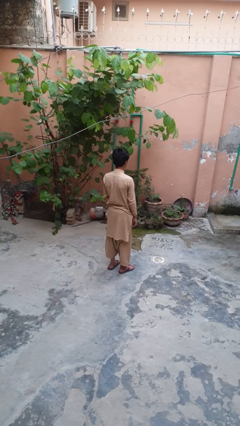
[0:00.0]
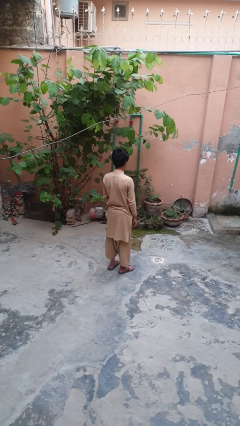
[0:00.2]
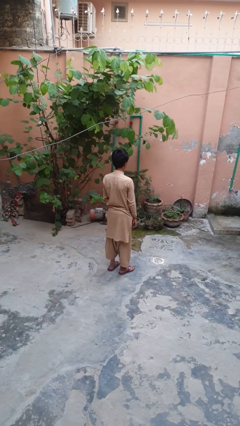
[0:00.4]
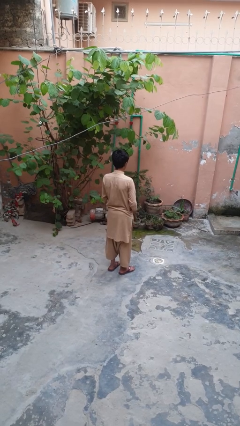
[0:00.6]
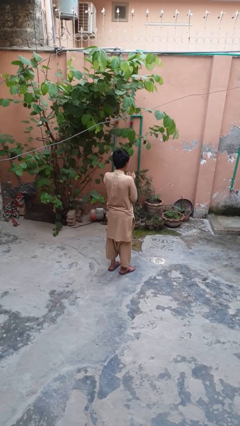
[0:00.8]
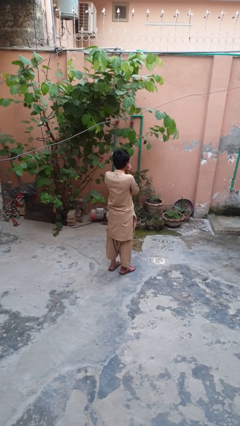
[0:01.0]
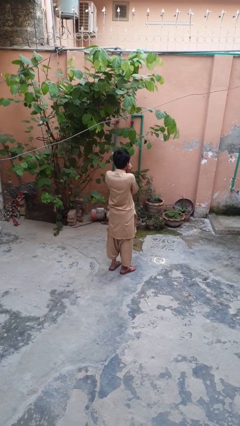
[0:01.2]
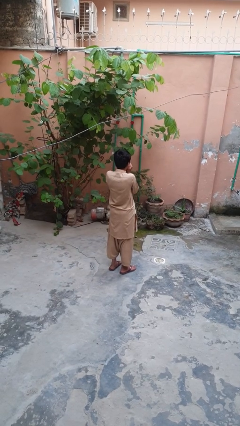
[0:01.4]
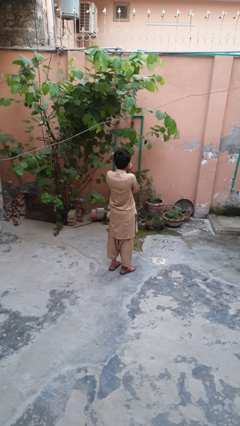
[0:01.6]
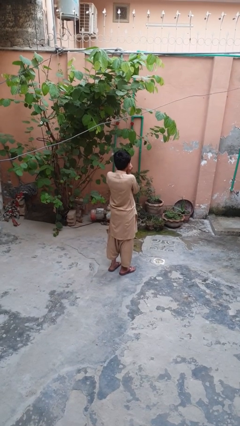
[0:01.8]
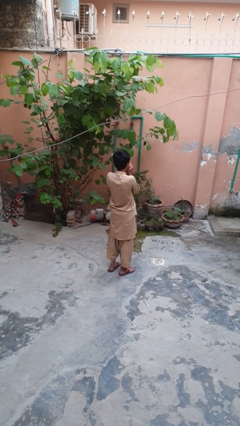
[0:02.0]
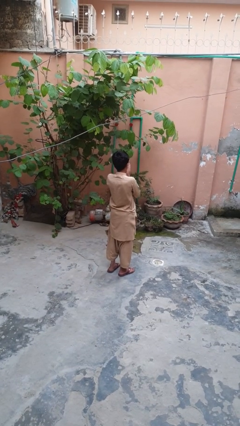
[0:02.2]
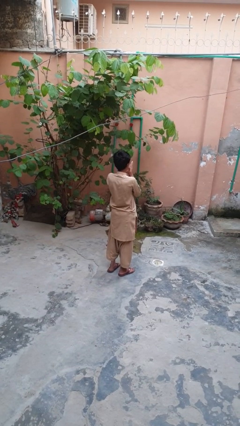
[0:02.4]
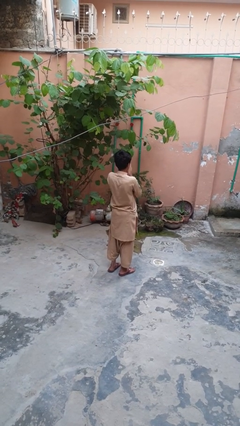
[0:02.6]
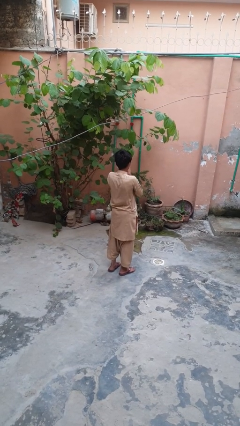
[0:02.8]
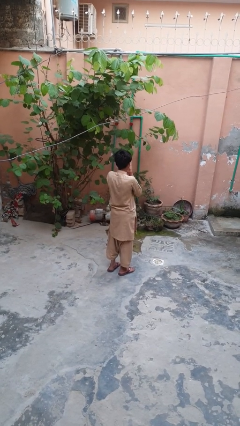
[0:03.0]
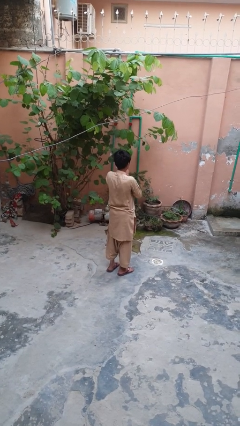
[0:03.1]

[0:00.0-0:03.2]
person blows into hands

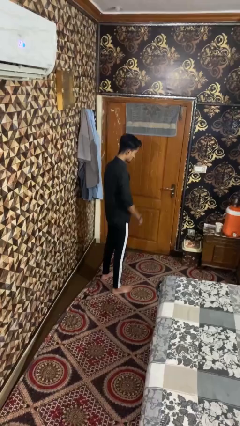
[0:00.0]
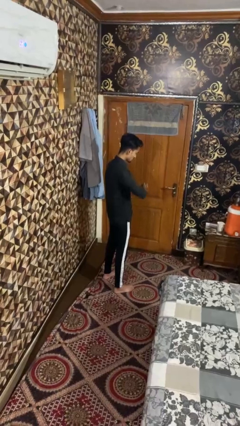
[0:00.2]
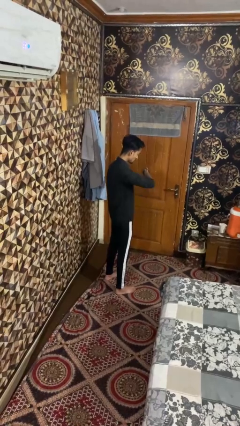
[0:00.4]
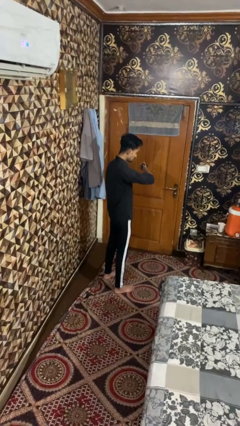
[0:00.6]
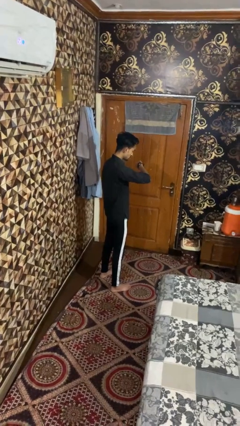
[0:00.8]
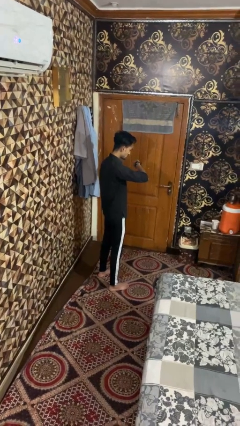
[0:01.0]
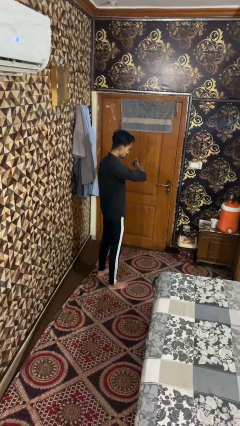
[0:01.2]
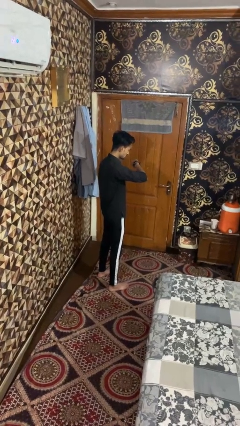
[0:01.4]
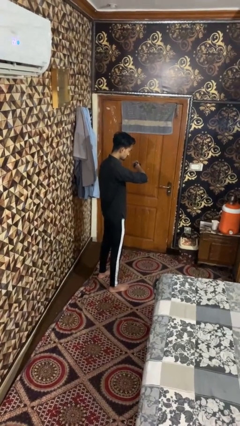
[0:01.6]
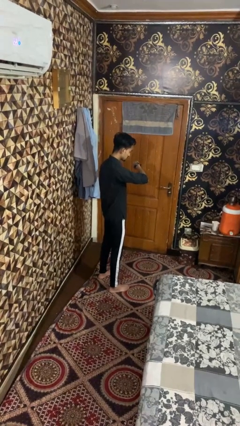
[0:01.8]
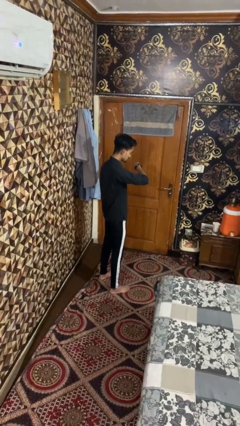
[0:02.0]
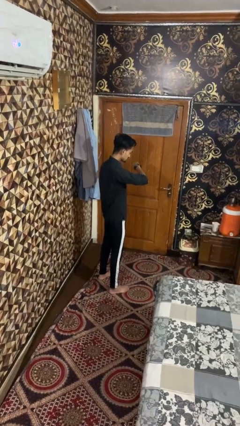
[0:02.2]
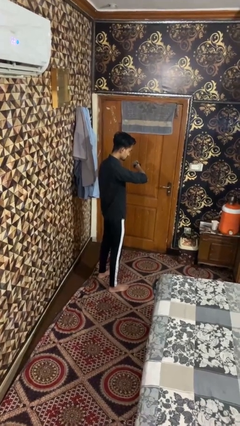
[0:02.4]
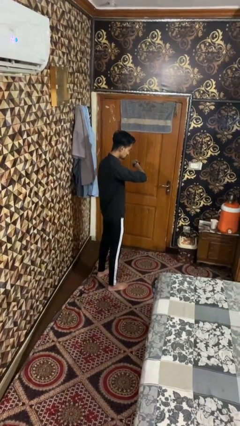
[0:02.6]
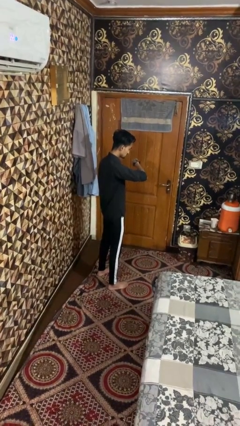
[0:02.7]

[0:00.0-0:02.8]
person looks at wristwatch

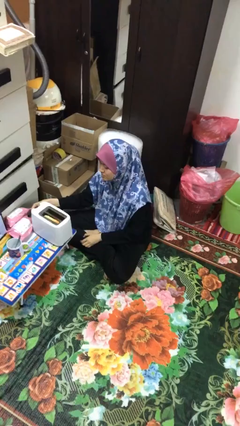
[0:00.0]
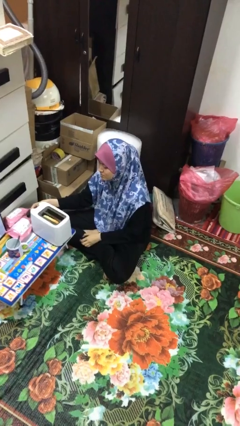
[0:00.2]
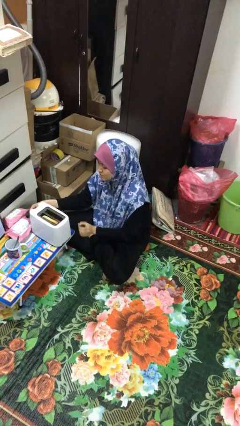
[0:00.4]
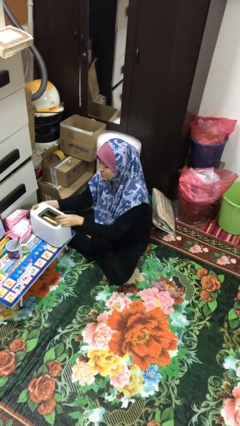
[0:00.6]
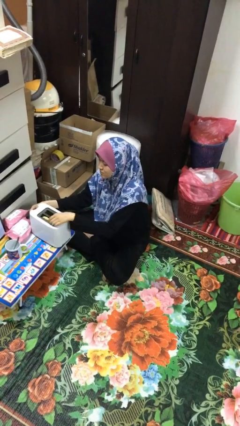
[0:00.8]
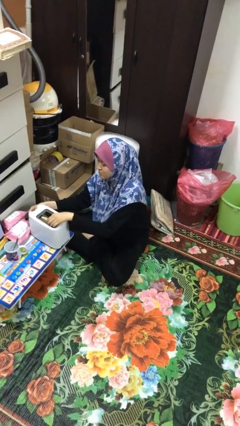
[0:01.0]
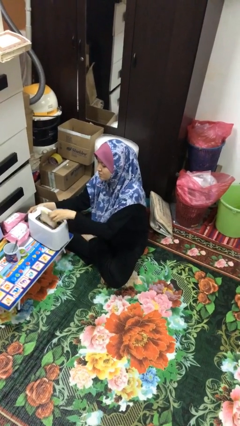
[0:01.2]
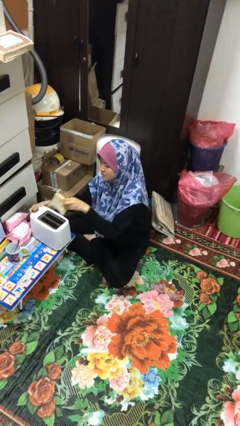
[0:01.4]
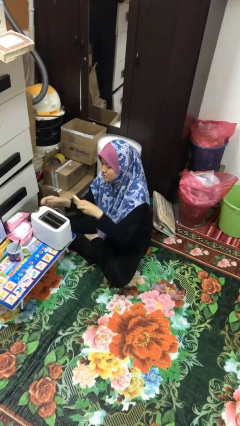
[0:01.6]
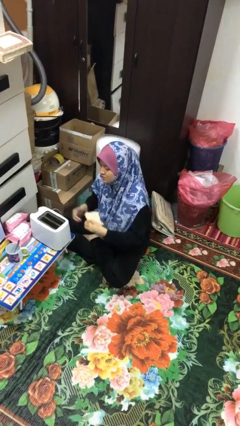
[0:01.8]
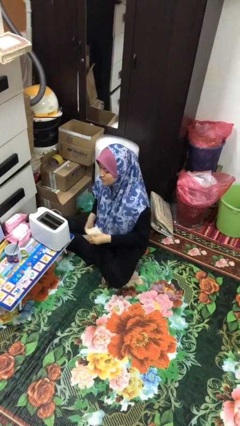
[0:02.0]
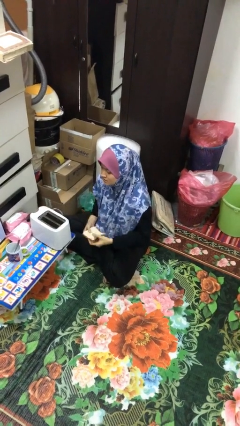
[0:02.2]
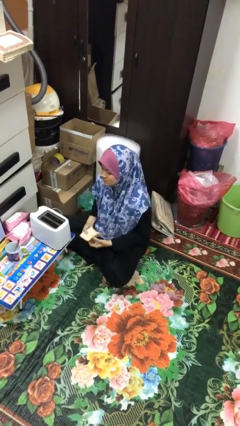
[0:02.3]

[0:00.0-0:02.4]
person takes object from toaster

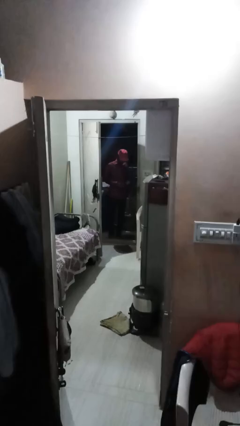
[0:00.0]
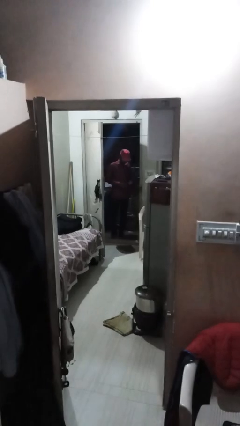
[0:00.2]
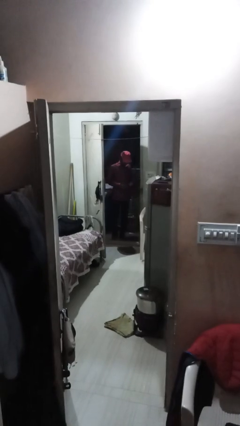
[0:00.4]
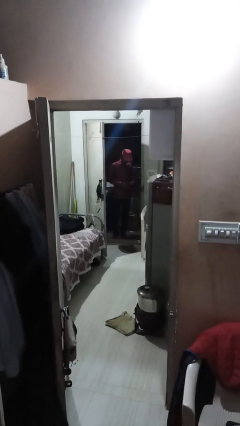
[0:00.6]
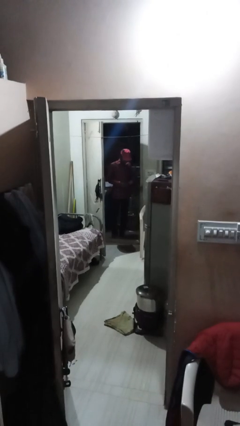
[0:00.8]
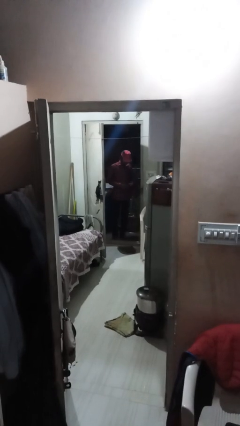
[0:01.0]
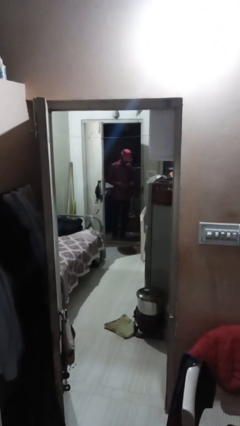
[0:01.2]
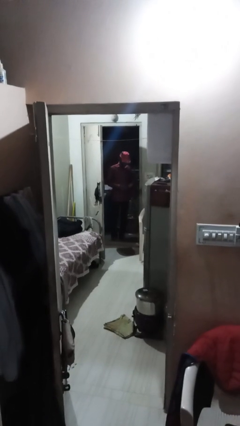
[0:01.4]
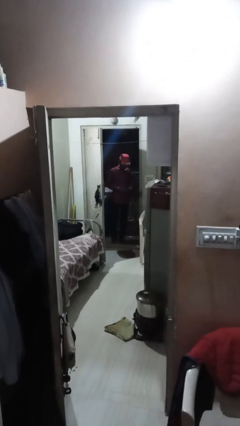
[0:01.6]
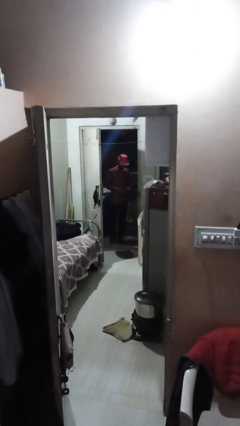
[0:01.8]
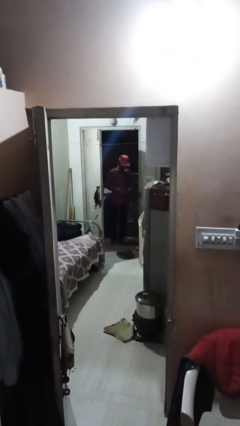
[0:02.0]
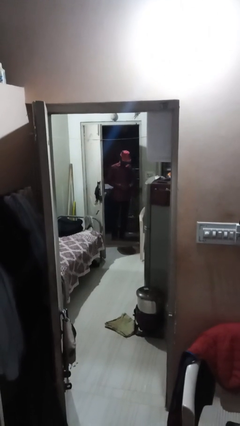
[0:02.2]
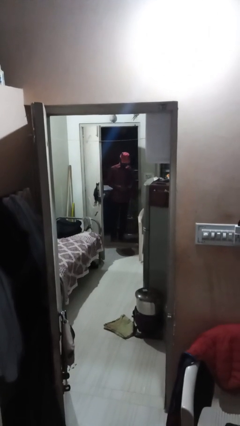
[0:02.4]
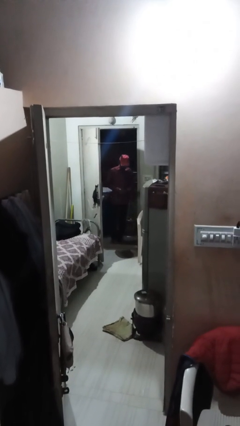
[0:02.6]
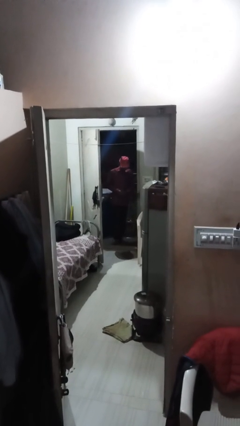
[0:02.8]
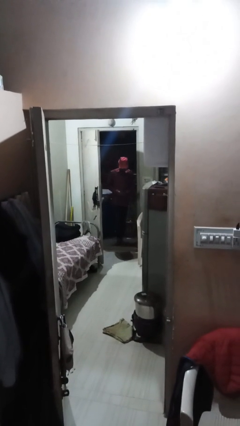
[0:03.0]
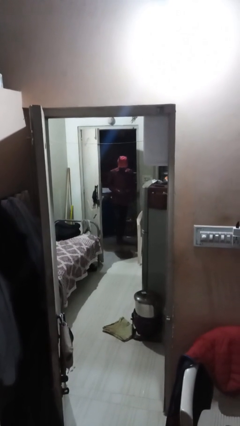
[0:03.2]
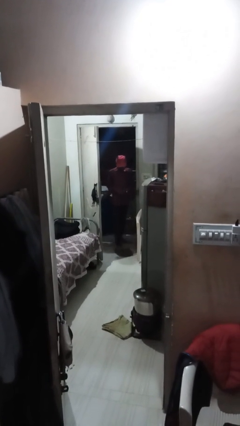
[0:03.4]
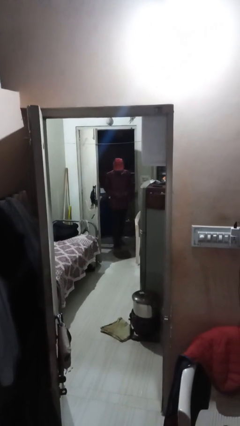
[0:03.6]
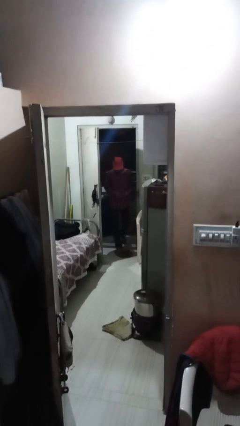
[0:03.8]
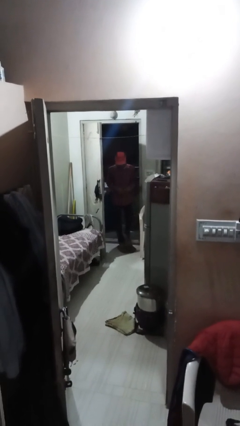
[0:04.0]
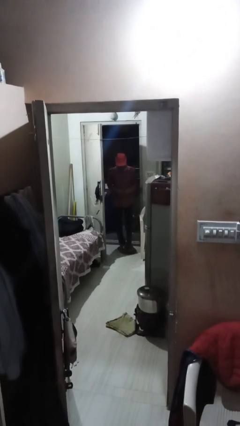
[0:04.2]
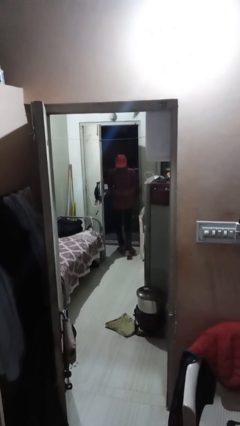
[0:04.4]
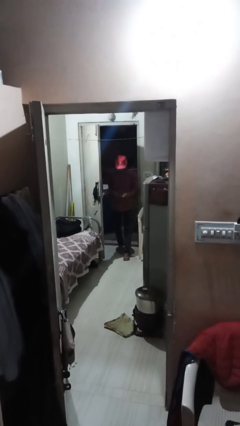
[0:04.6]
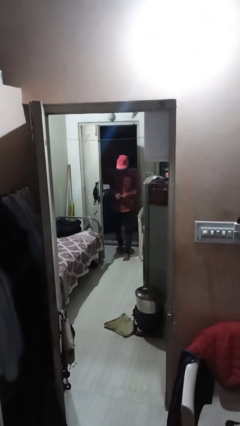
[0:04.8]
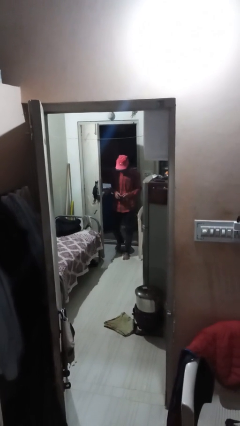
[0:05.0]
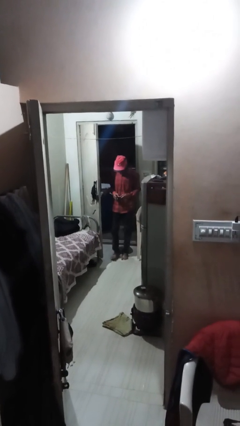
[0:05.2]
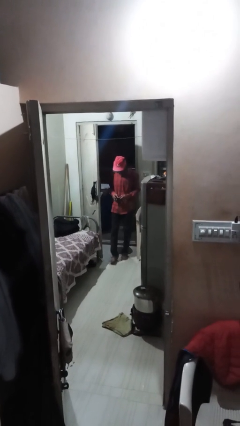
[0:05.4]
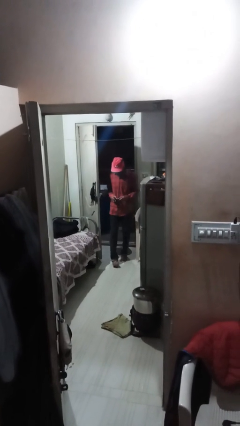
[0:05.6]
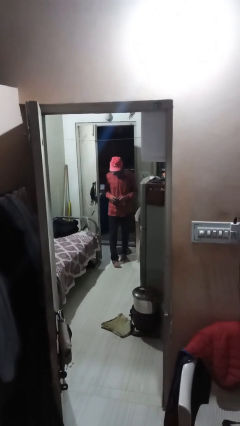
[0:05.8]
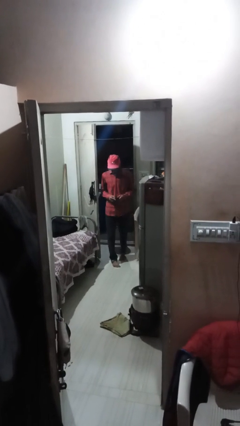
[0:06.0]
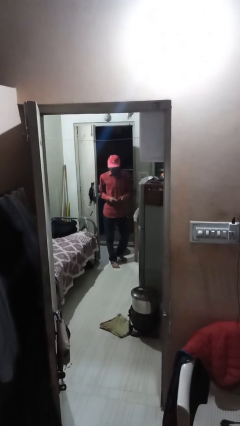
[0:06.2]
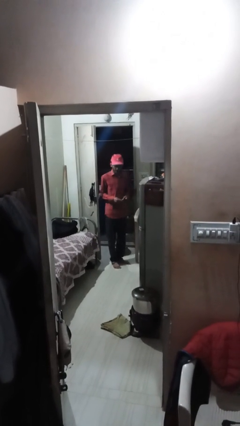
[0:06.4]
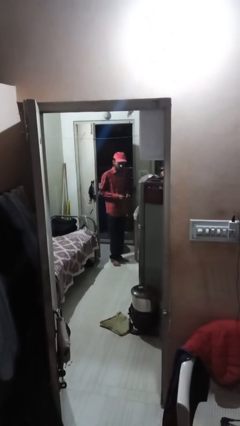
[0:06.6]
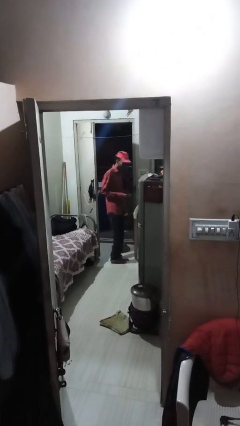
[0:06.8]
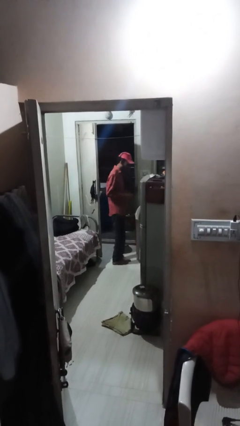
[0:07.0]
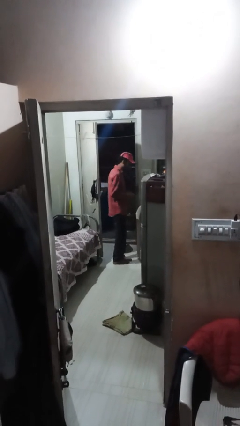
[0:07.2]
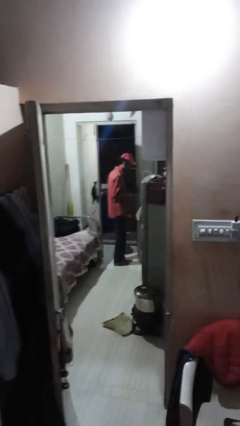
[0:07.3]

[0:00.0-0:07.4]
person enters scene through structure

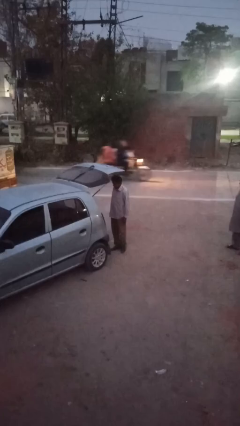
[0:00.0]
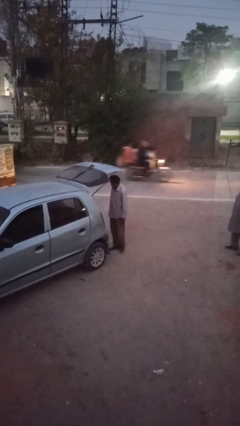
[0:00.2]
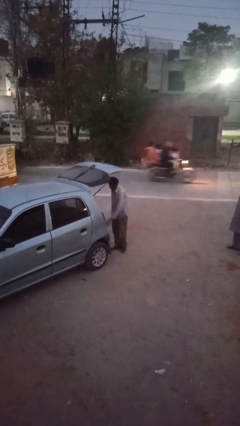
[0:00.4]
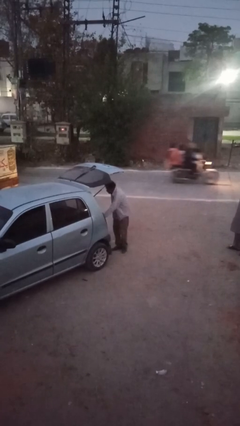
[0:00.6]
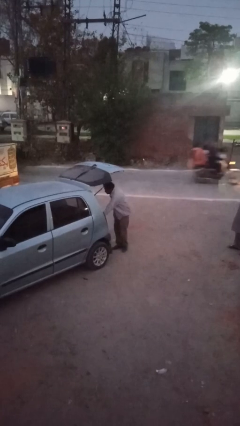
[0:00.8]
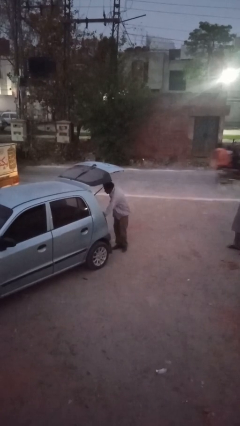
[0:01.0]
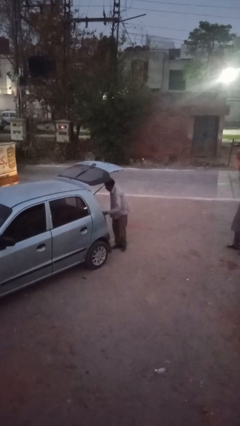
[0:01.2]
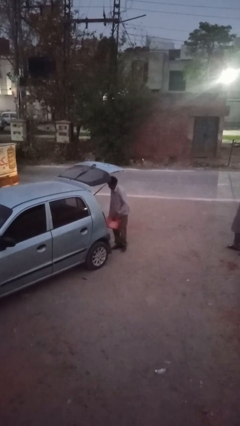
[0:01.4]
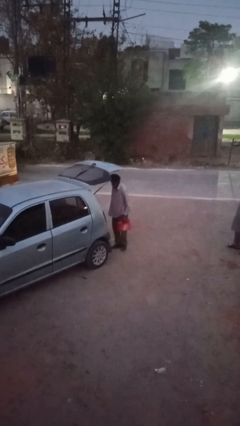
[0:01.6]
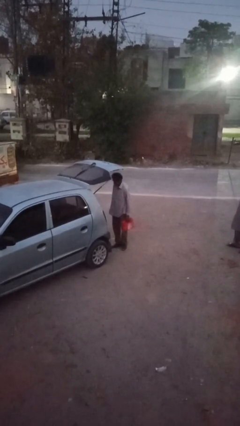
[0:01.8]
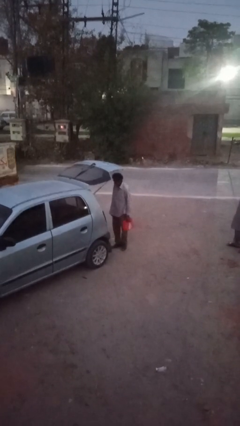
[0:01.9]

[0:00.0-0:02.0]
person unloads car
